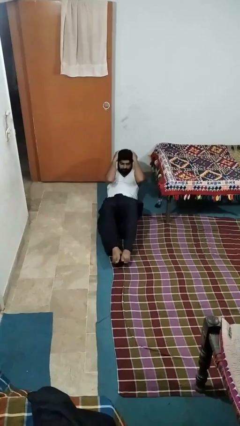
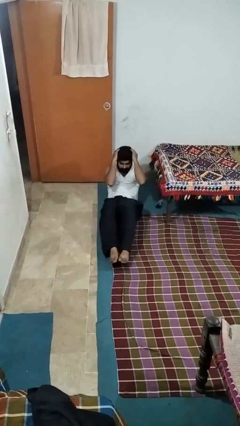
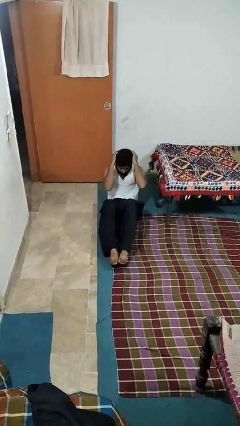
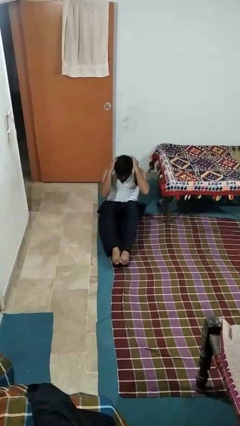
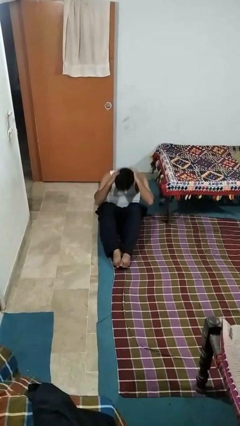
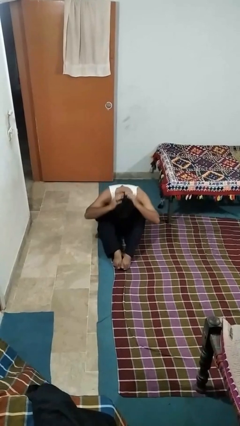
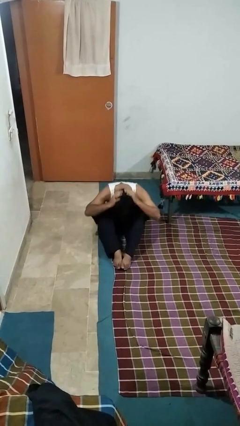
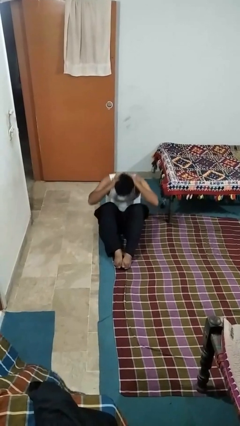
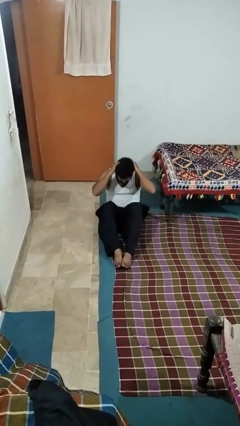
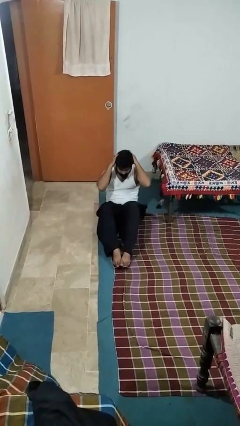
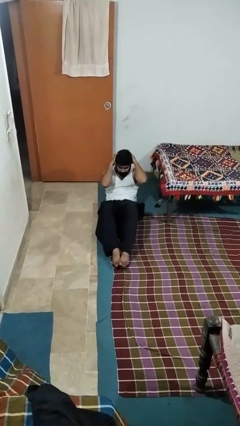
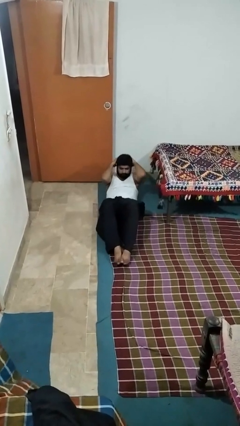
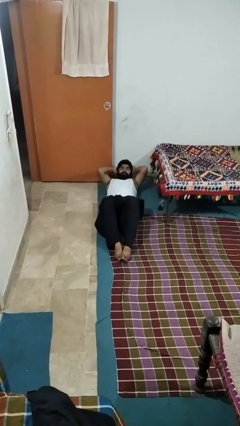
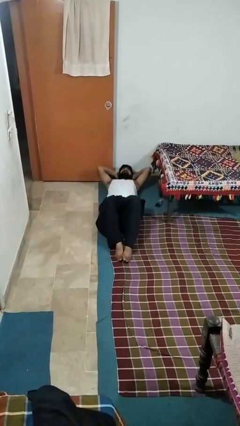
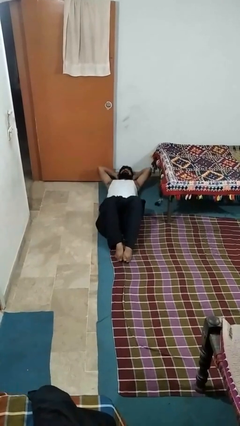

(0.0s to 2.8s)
person exercises with situp

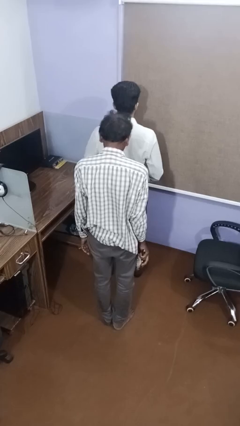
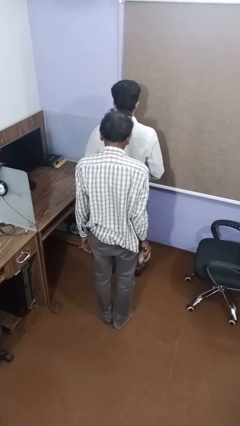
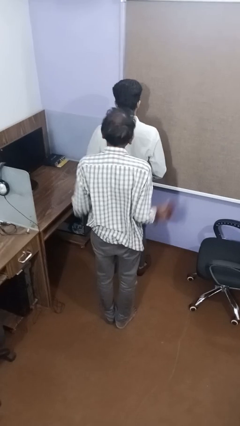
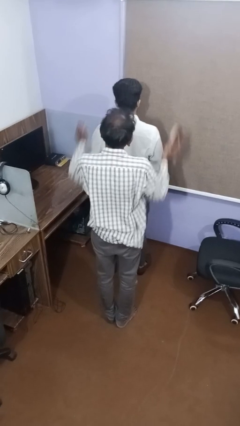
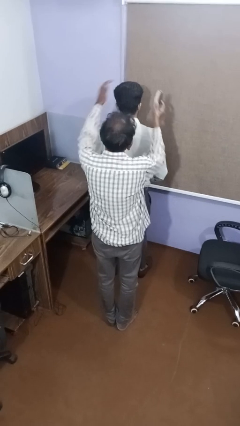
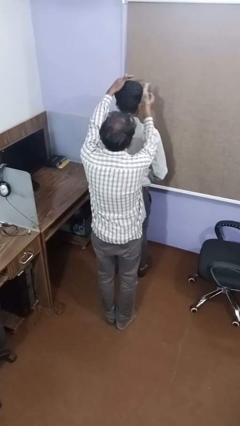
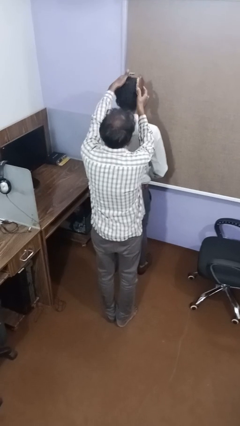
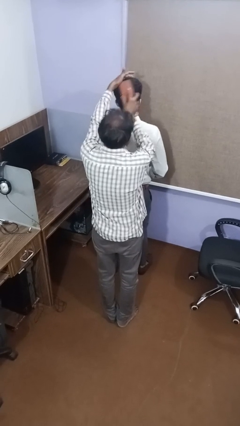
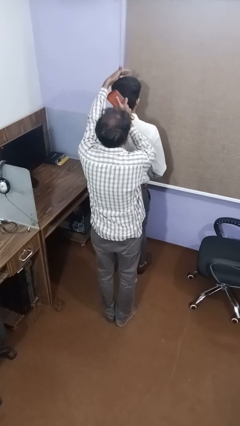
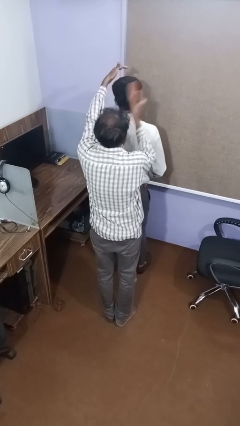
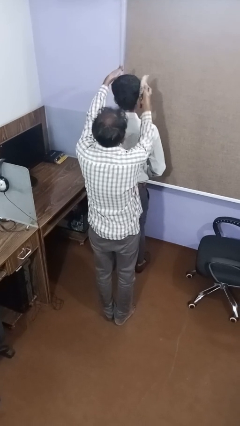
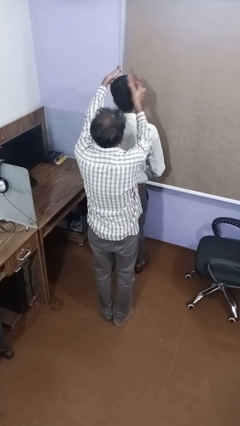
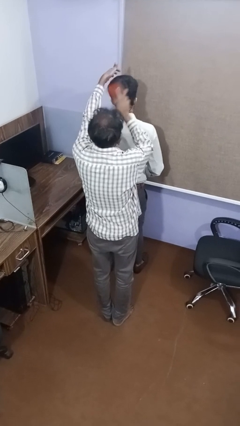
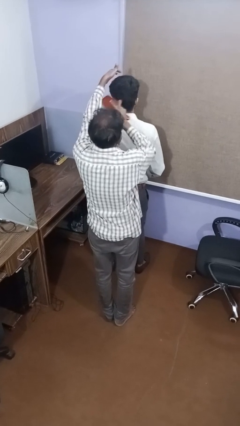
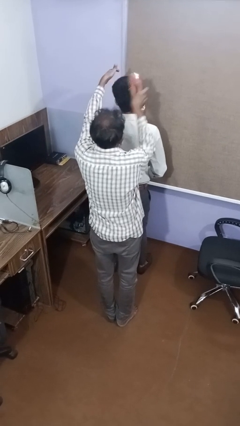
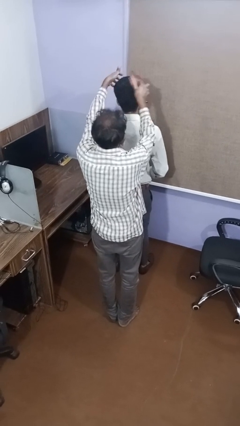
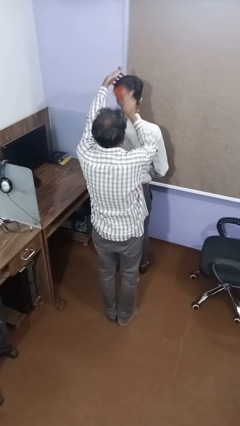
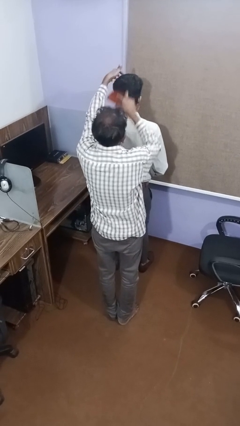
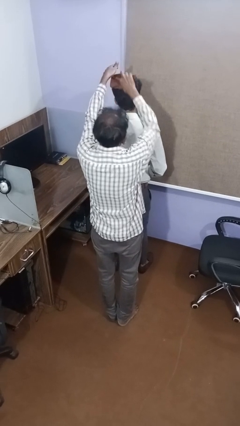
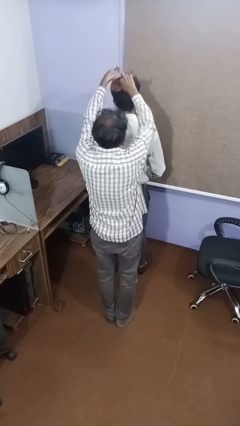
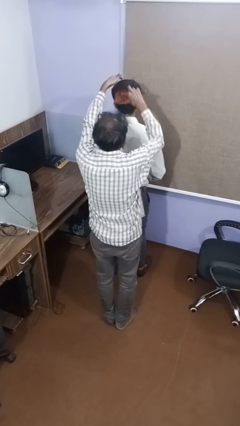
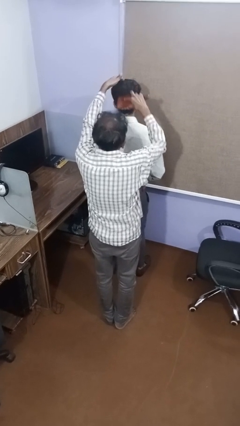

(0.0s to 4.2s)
person brushes hair of person

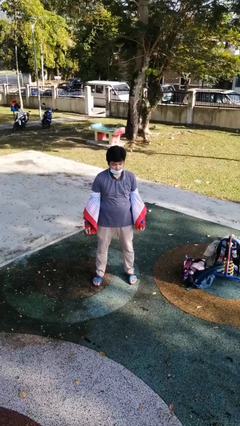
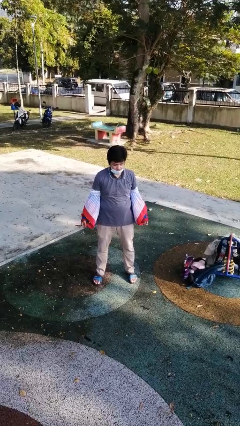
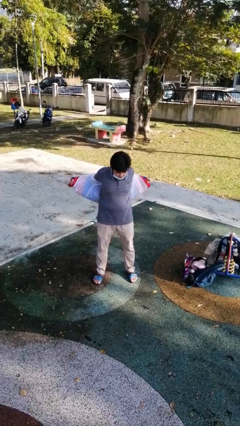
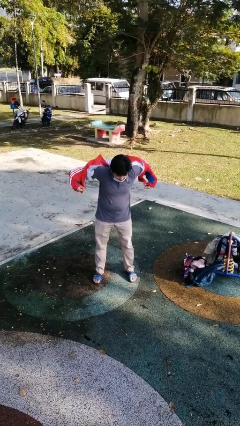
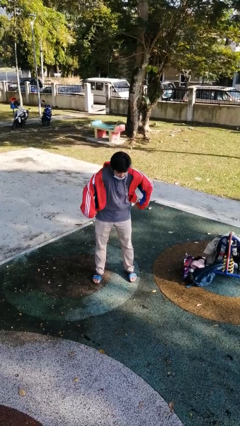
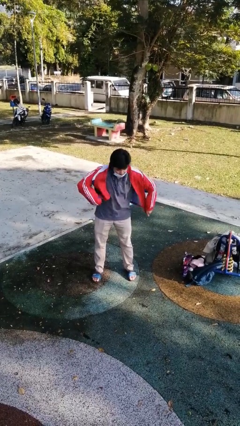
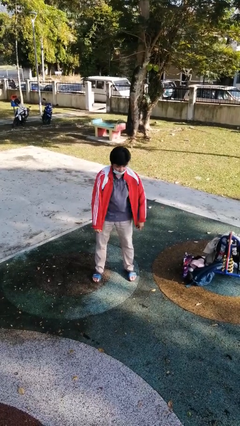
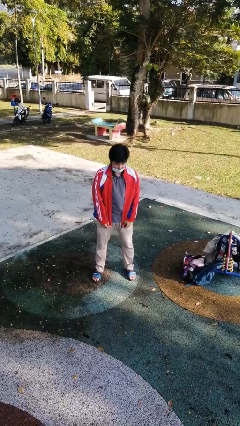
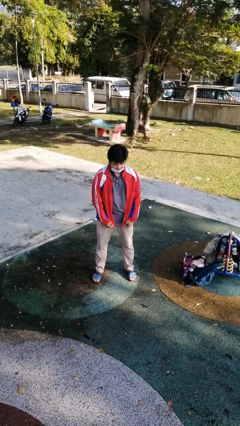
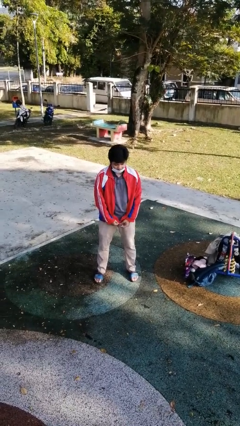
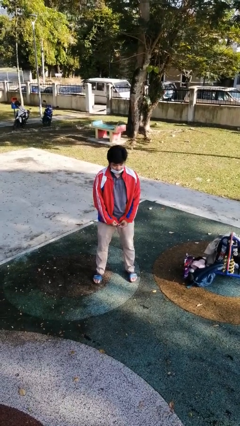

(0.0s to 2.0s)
person puts on jacket

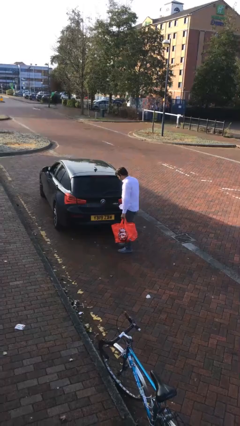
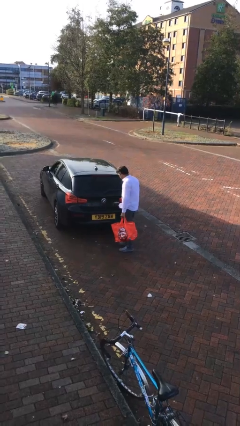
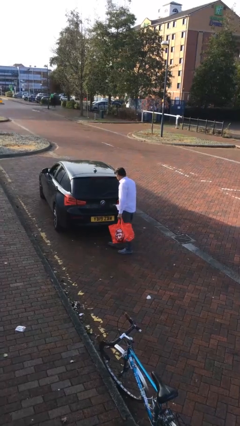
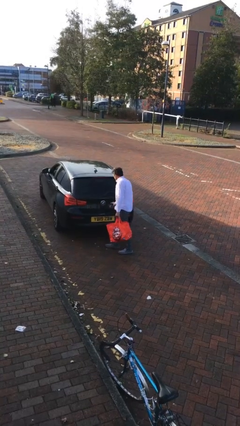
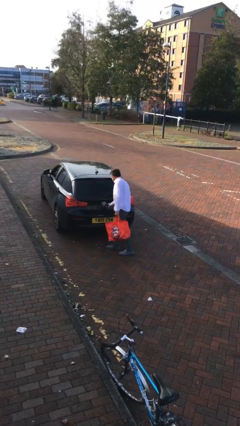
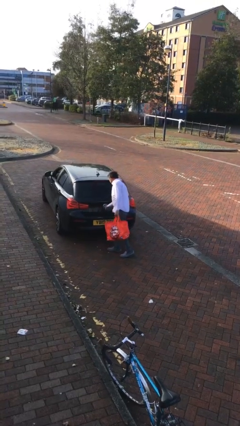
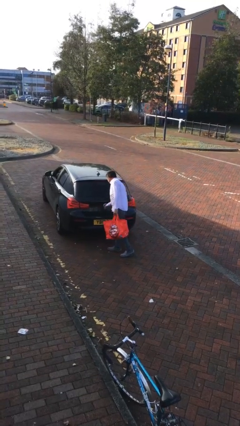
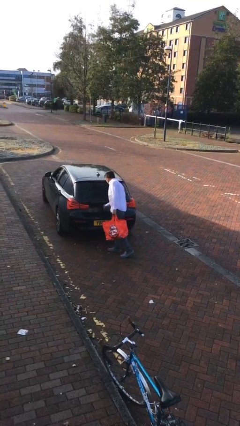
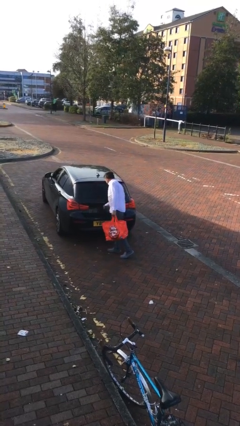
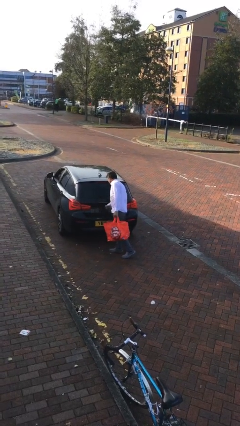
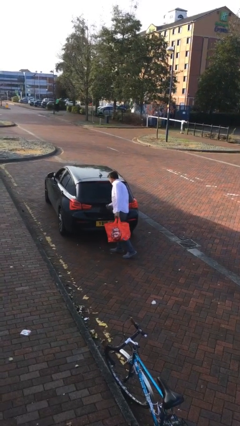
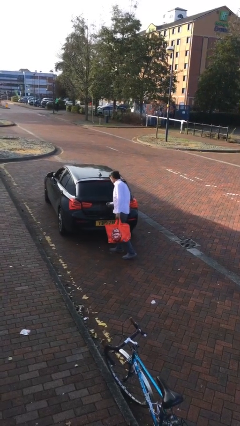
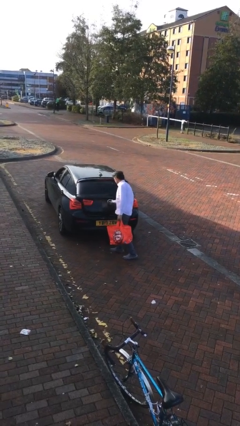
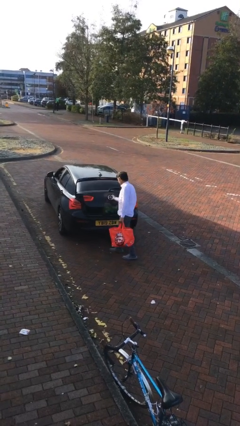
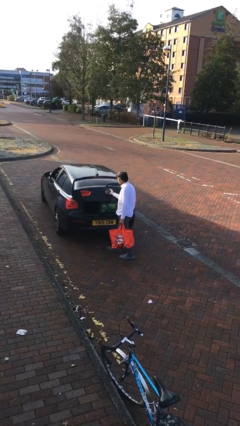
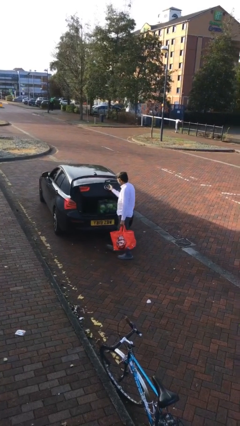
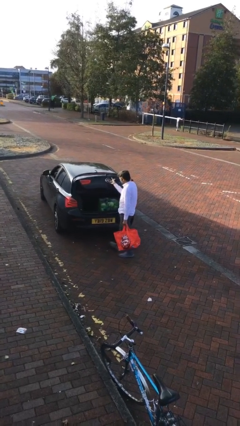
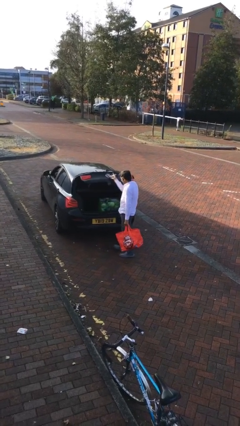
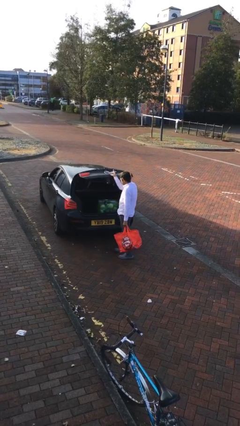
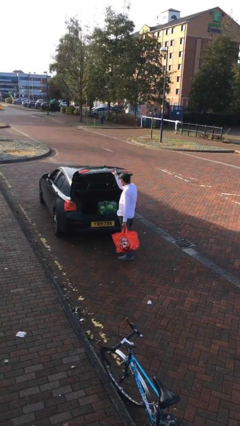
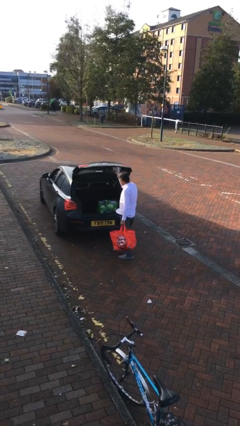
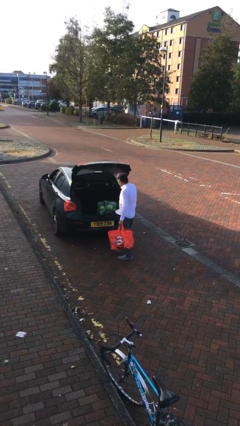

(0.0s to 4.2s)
person opens car trunk

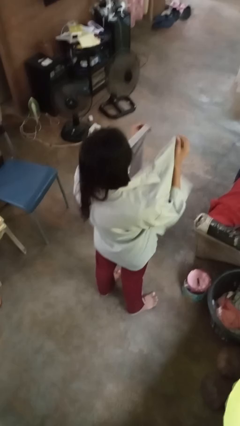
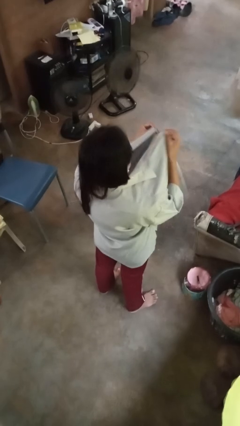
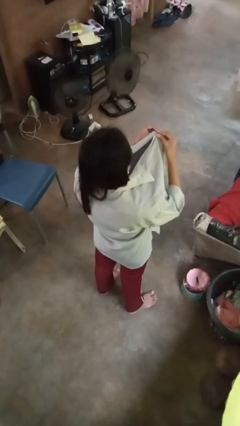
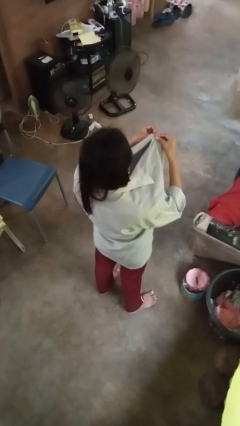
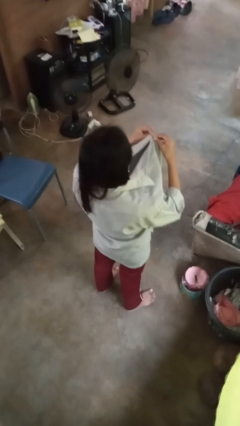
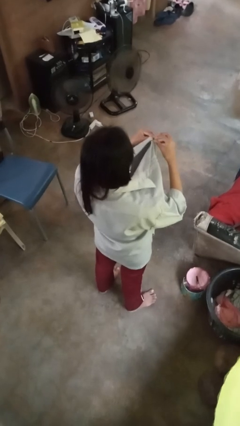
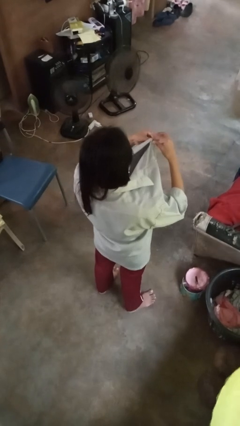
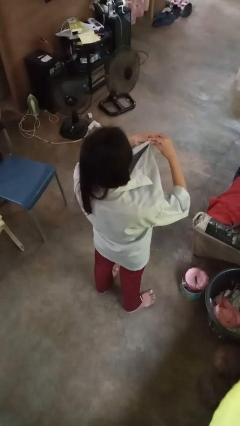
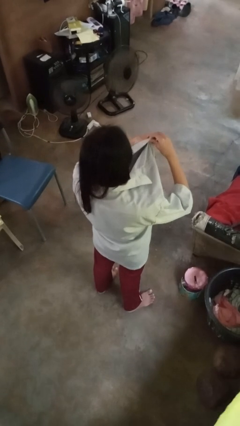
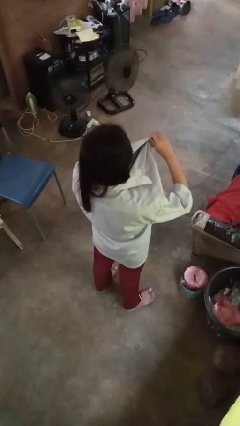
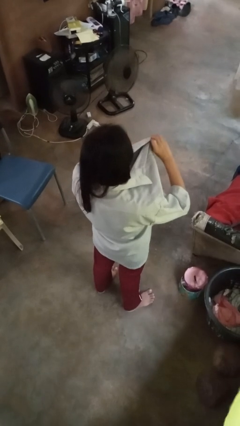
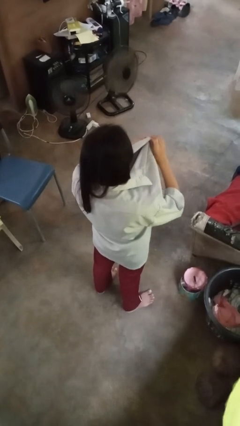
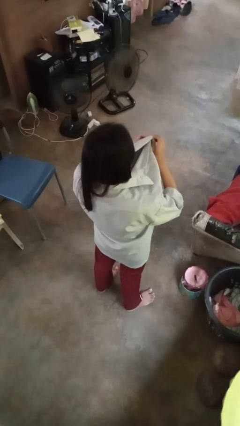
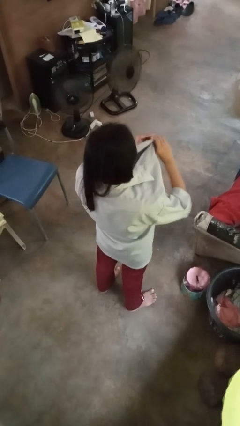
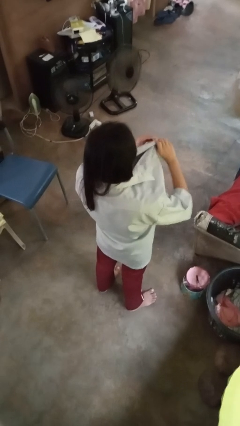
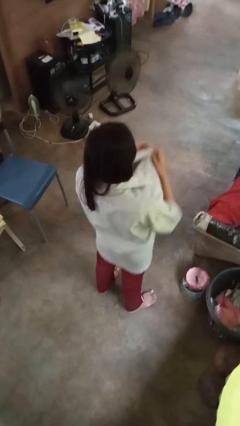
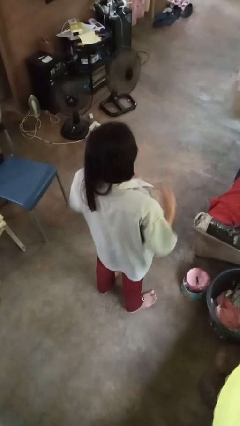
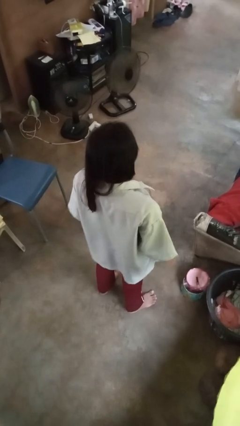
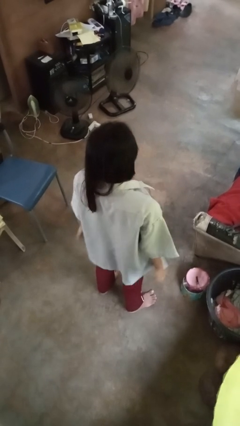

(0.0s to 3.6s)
person buttons shirt

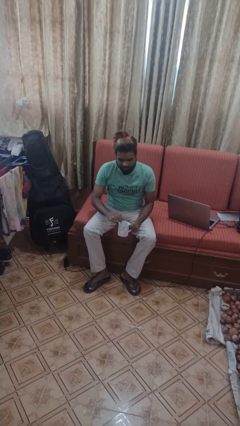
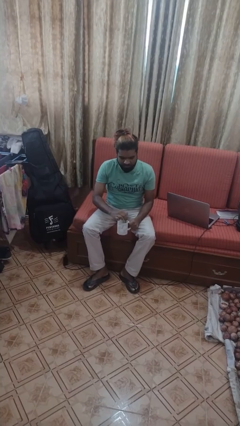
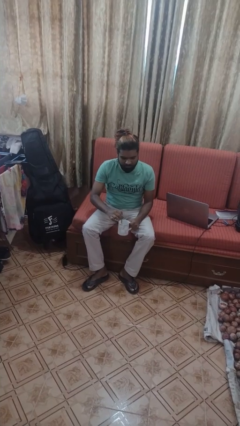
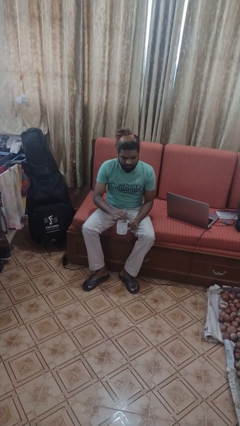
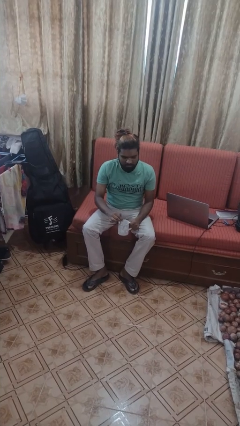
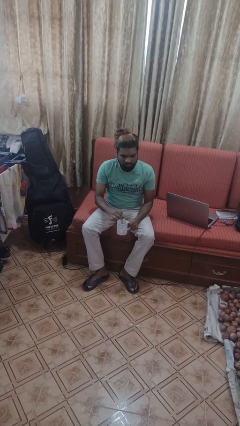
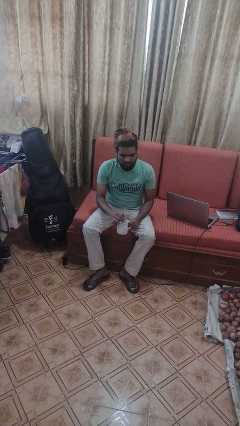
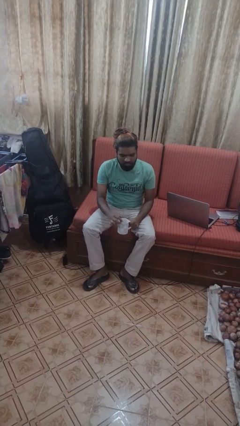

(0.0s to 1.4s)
person stirs mug
